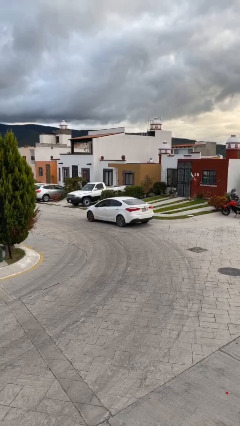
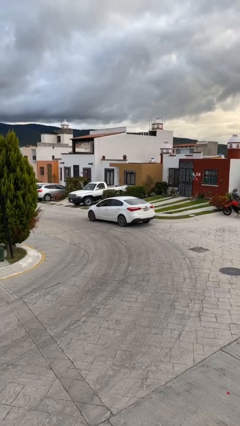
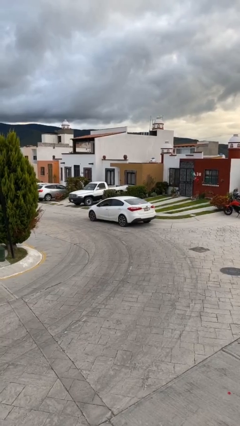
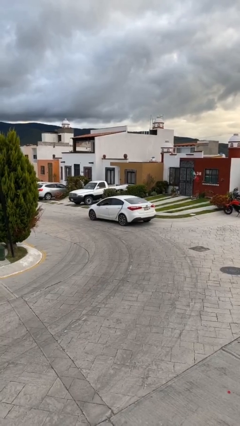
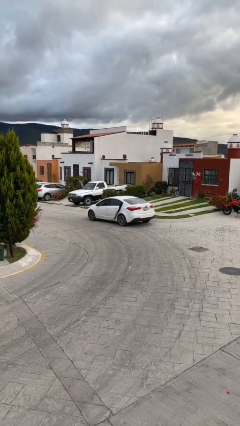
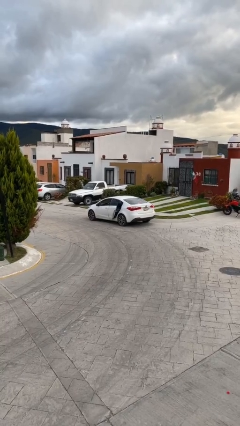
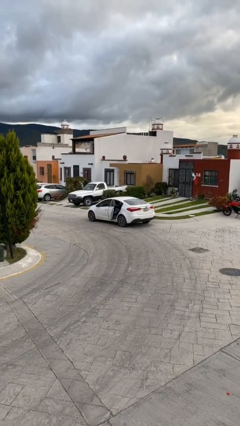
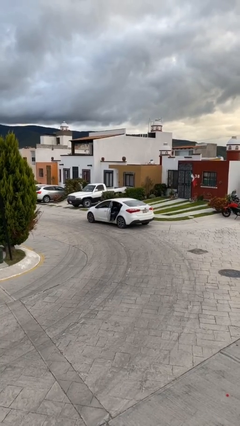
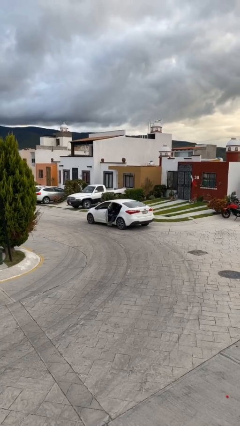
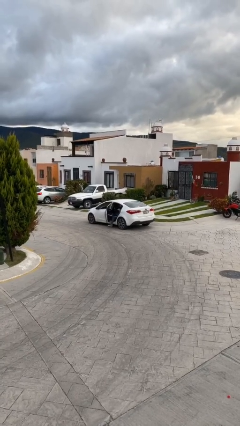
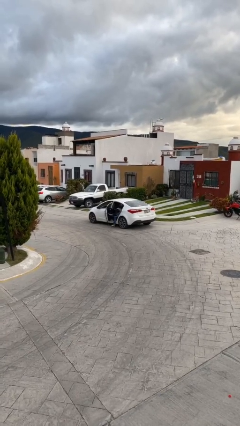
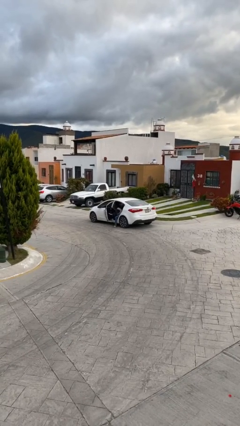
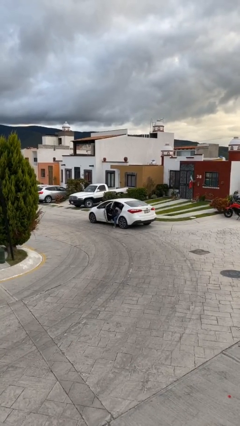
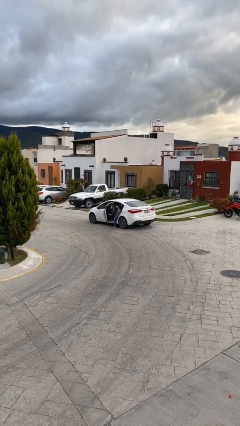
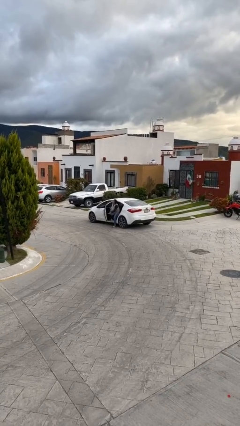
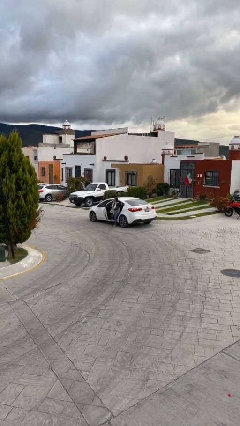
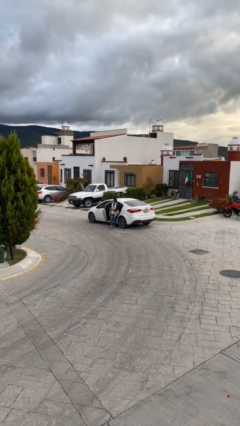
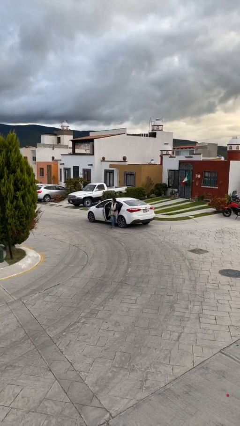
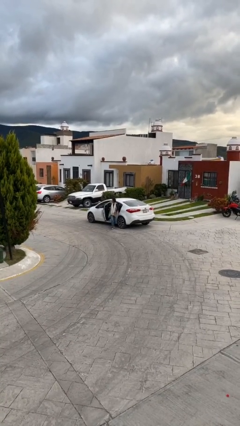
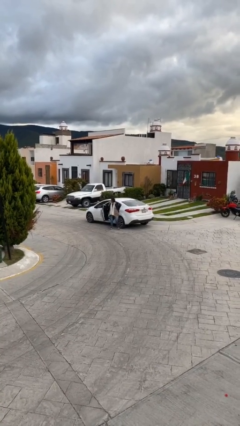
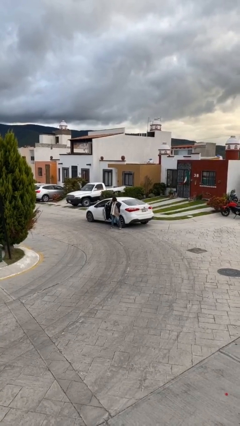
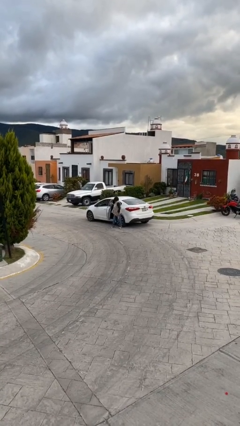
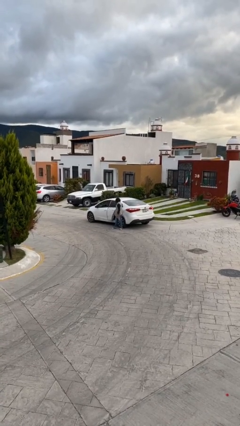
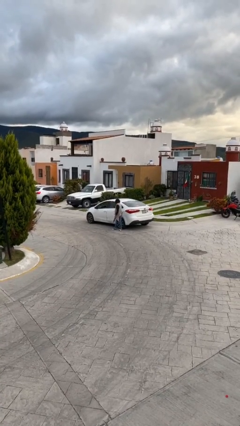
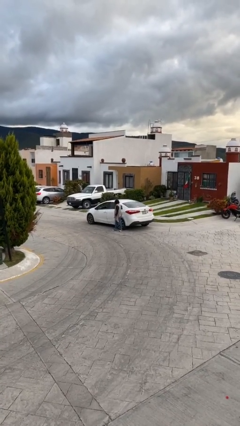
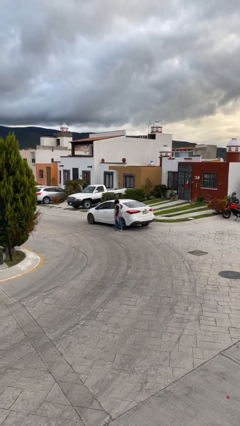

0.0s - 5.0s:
car drops off person

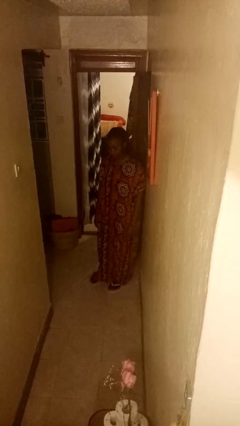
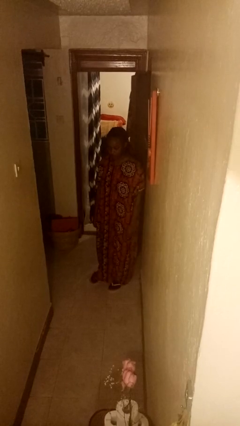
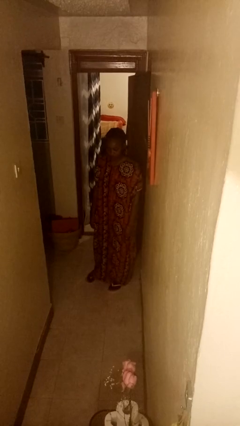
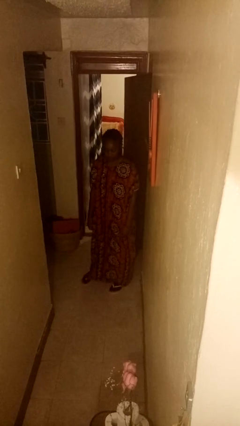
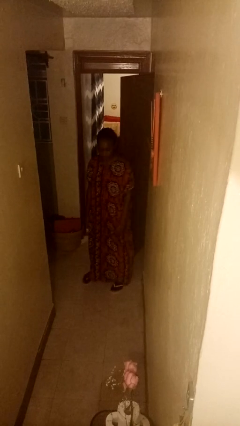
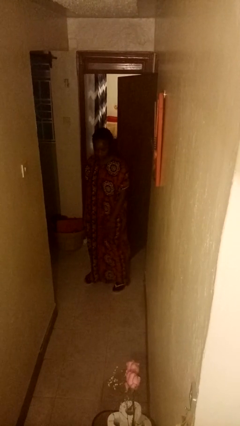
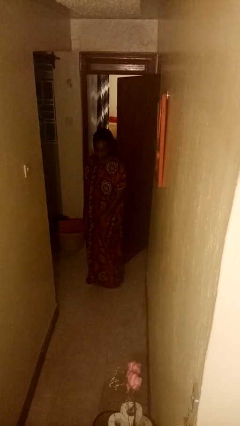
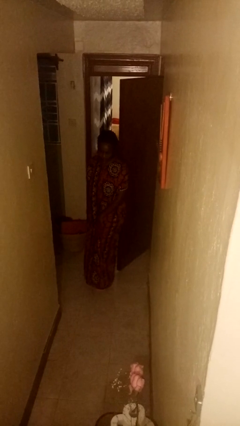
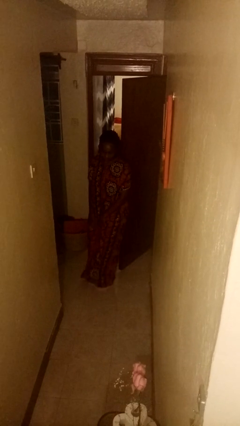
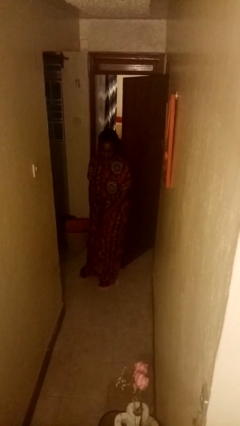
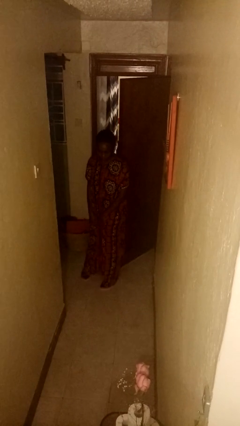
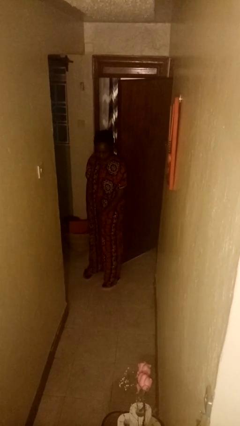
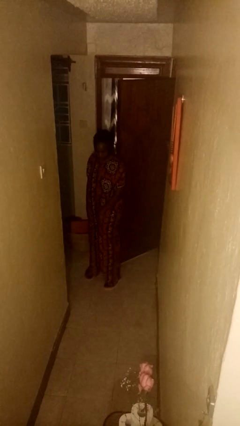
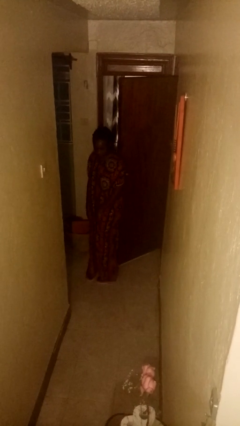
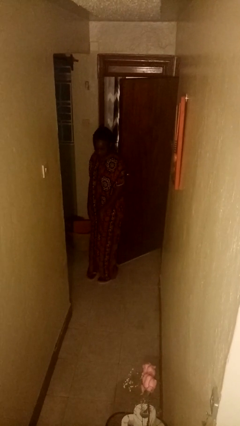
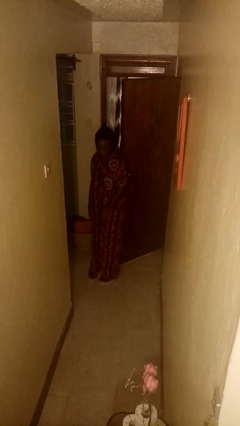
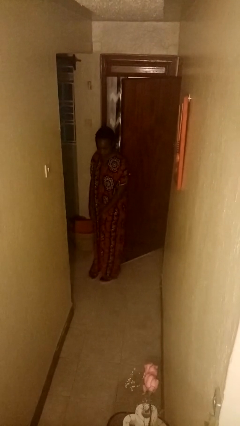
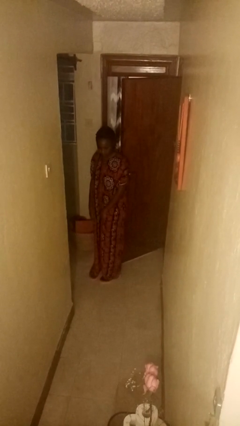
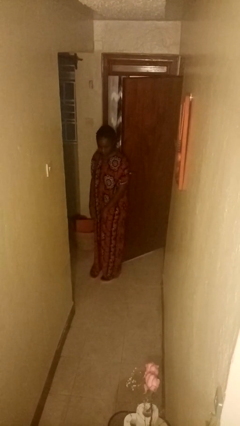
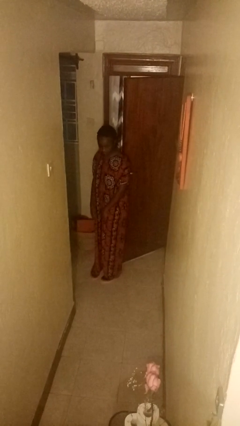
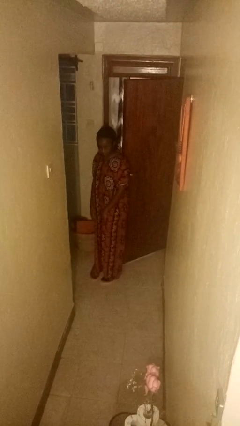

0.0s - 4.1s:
person opens facility door

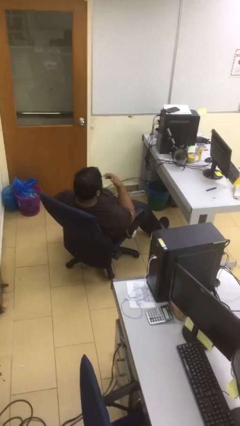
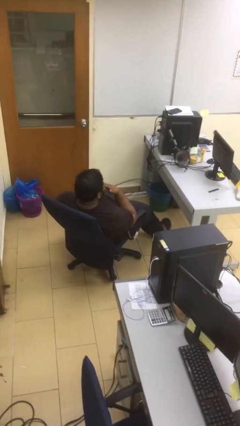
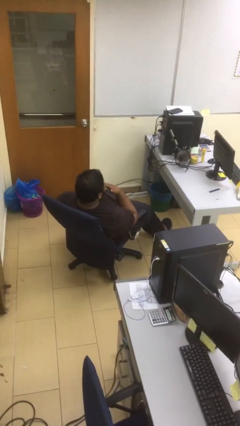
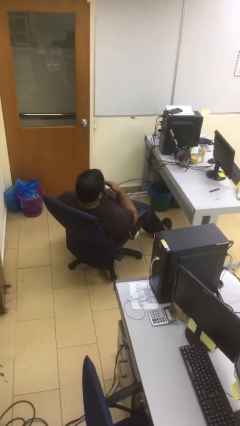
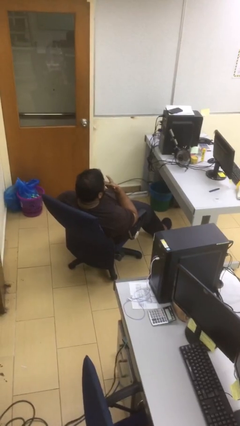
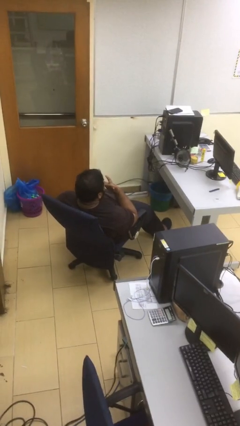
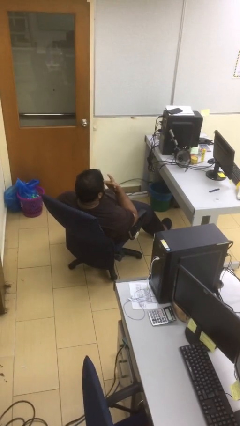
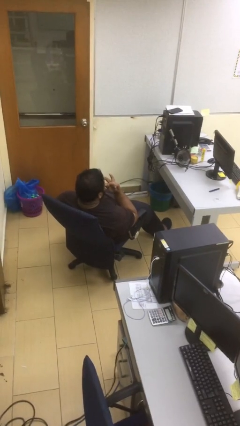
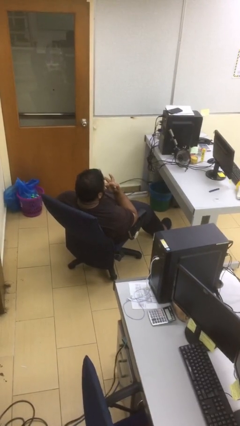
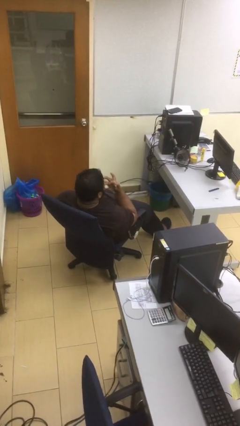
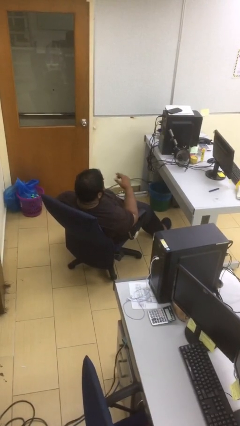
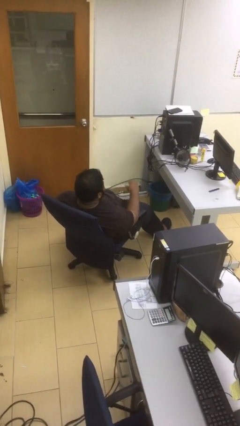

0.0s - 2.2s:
person licks fingers

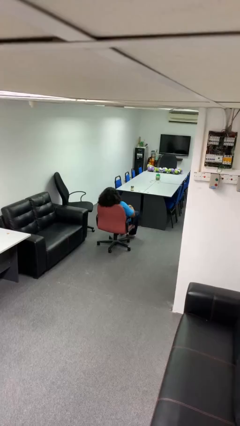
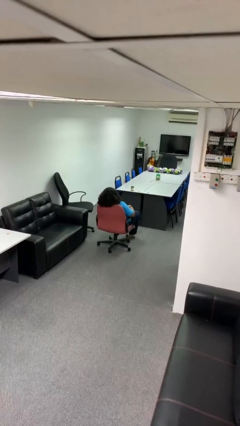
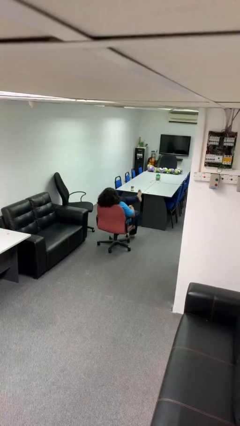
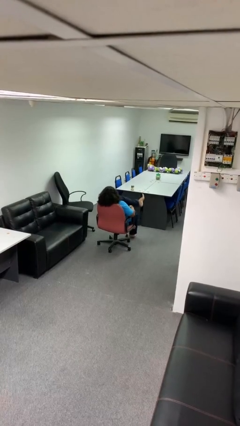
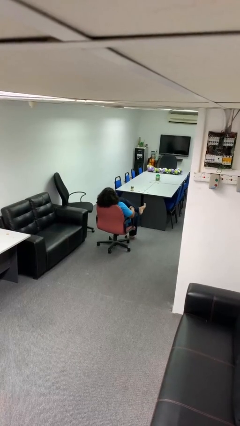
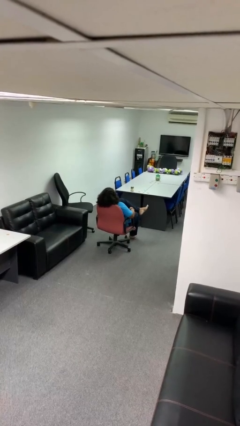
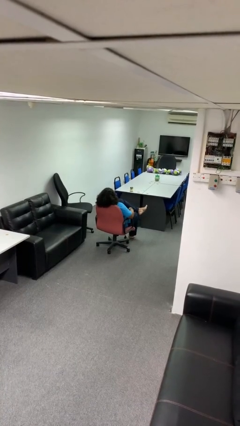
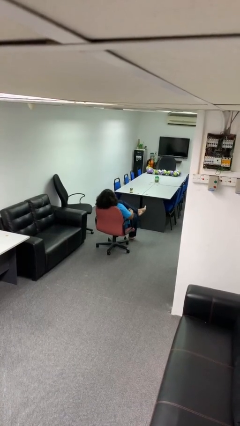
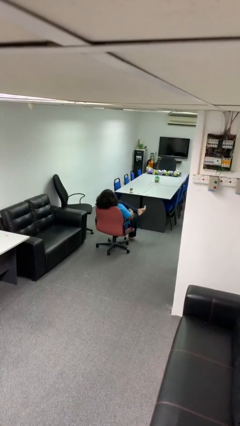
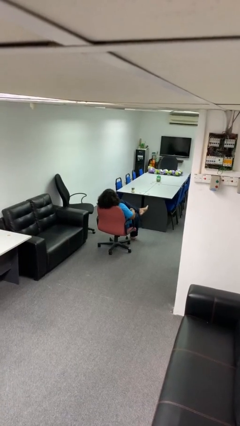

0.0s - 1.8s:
person crosses legs

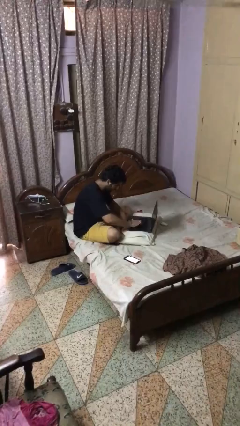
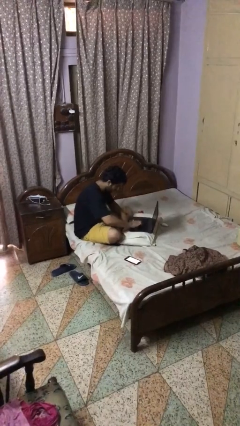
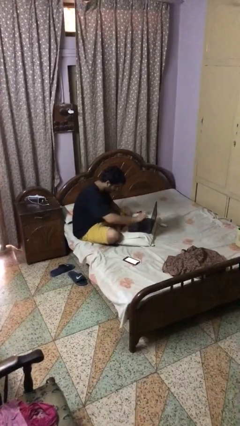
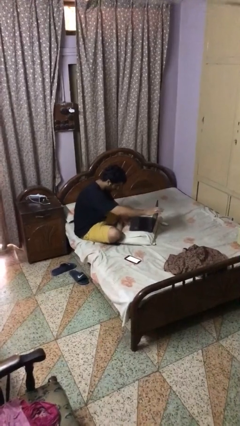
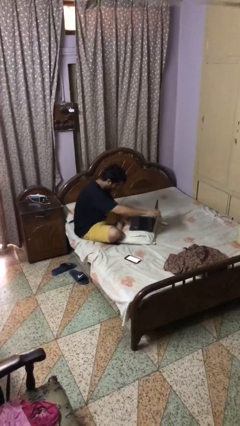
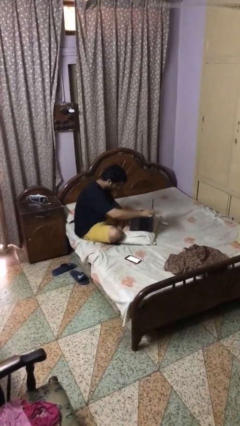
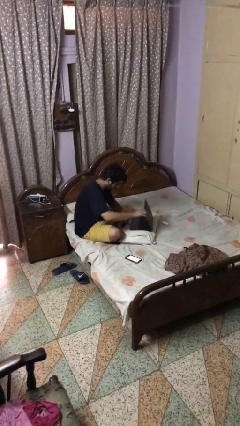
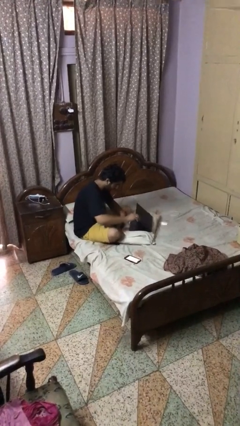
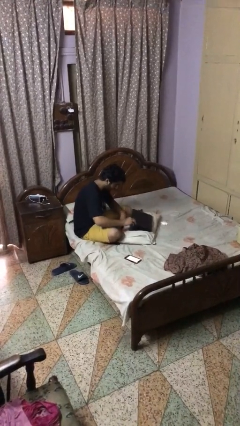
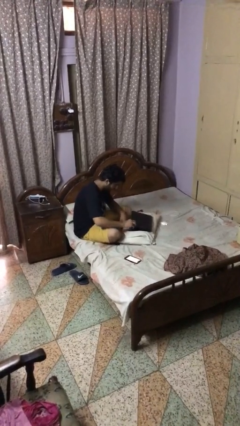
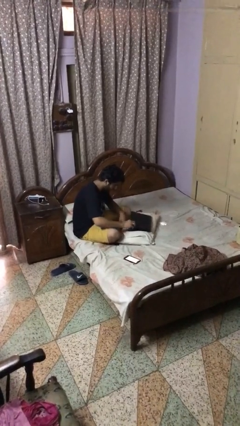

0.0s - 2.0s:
person closes laptop

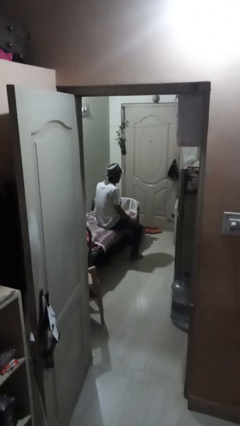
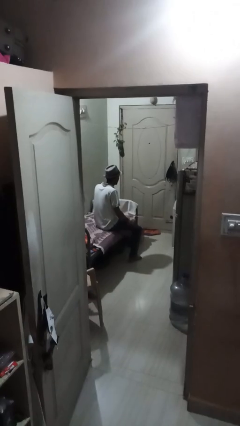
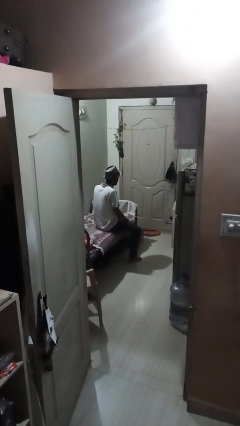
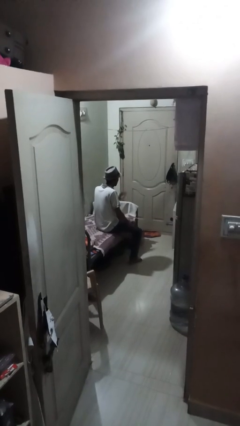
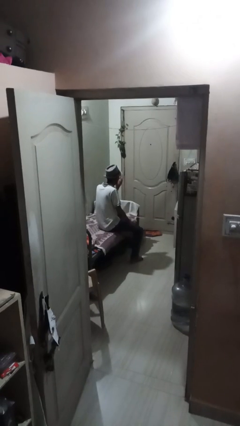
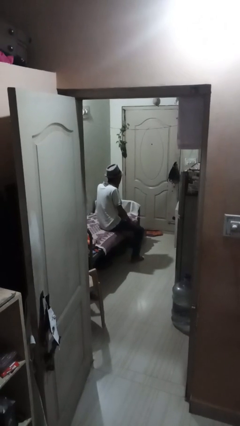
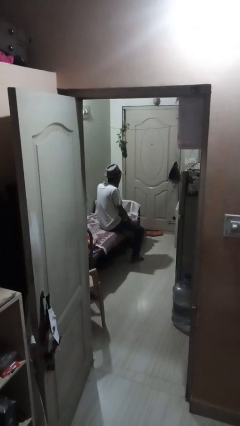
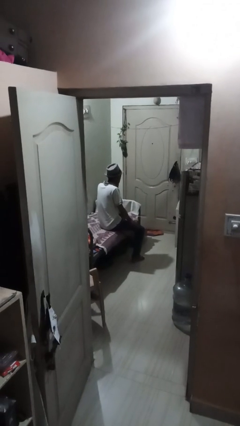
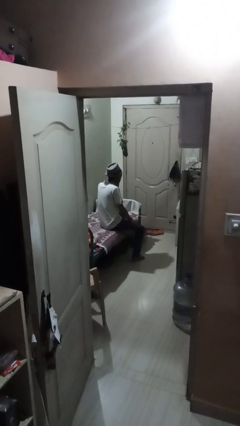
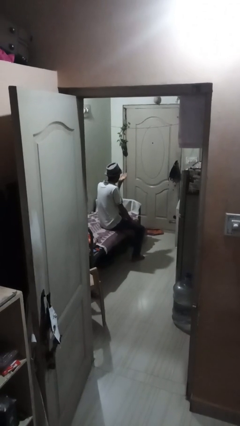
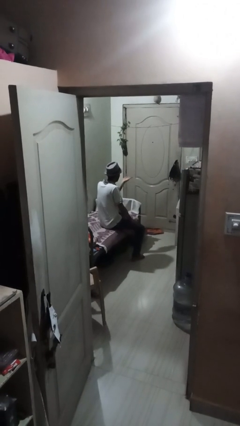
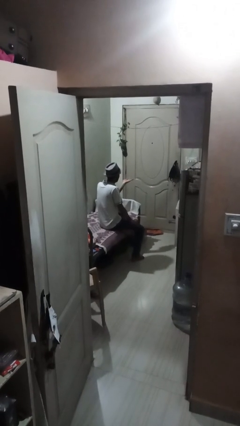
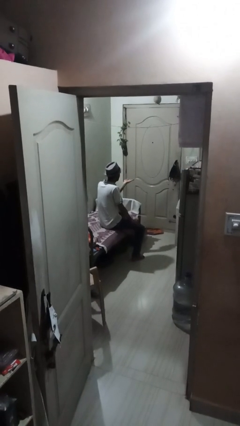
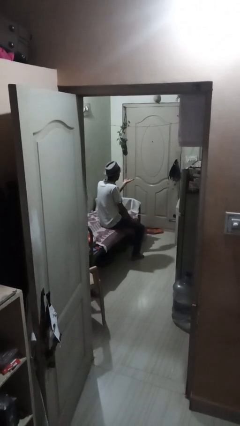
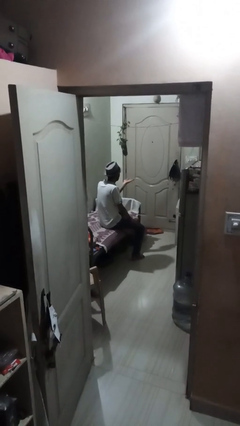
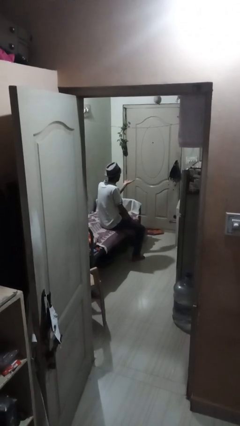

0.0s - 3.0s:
person gestures blow kiss
